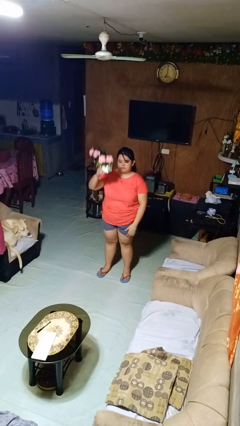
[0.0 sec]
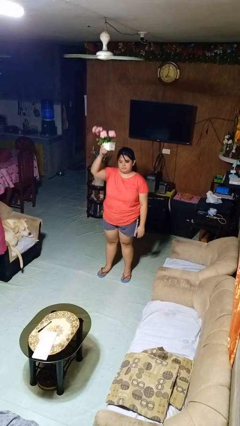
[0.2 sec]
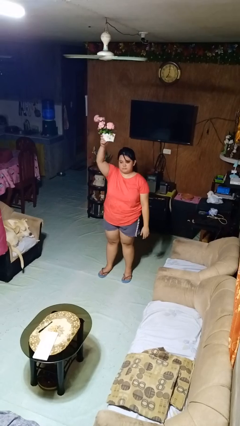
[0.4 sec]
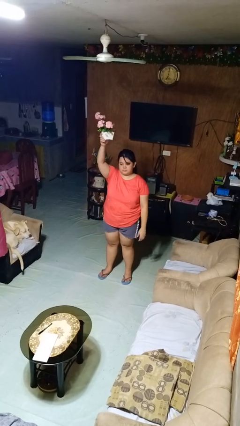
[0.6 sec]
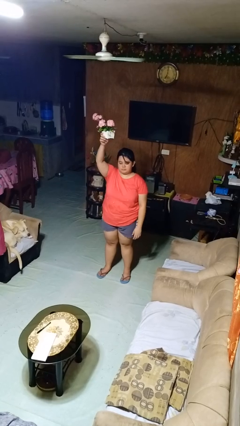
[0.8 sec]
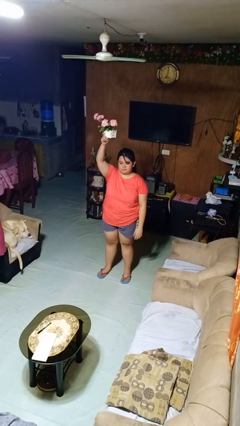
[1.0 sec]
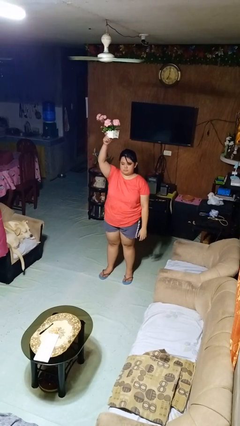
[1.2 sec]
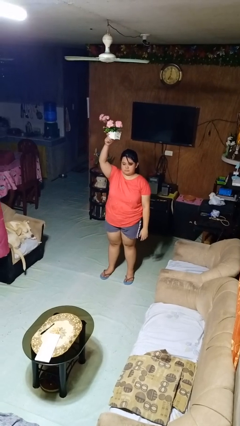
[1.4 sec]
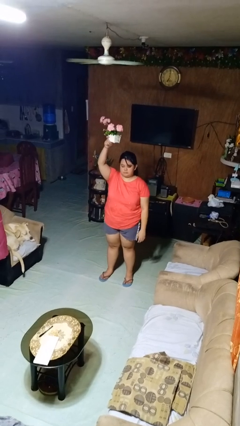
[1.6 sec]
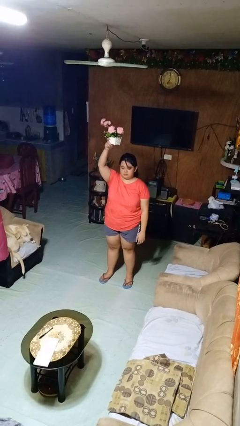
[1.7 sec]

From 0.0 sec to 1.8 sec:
person holds object above head

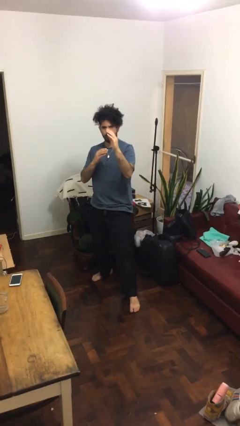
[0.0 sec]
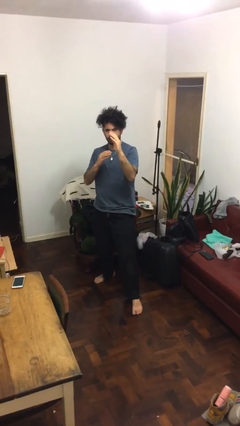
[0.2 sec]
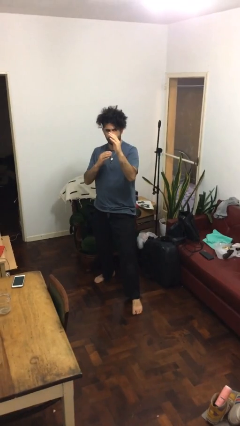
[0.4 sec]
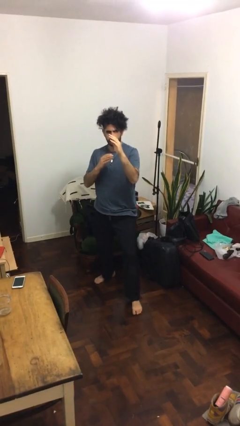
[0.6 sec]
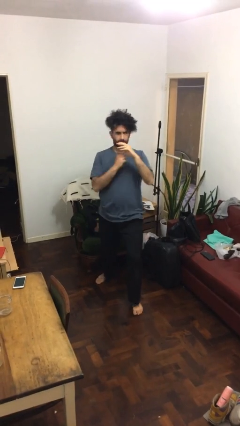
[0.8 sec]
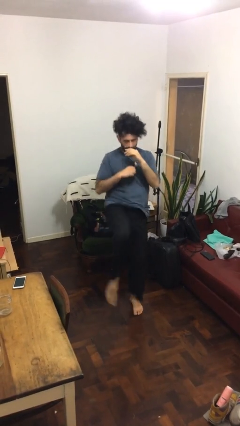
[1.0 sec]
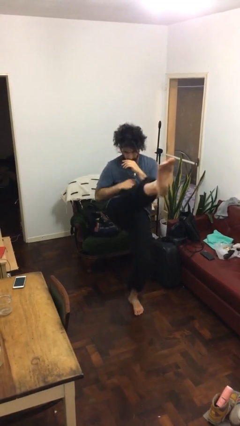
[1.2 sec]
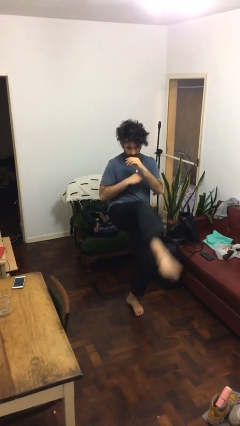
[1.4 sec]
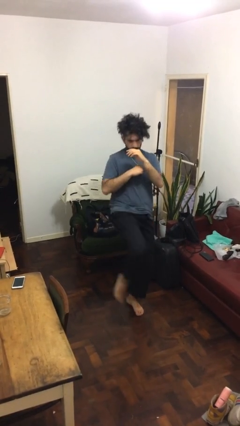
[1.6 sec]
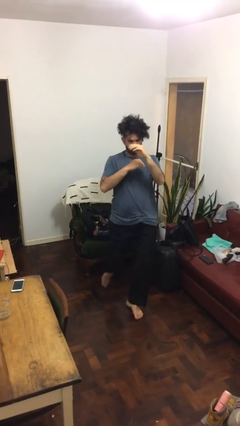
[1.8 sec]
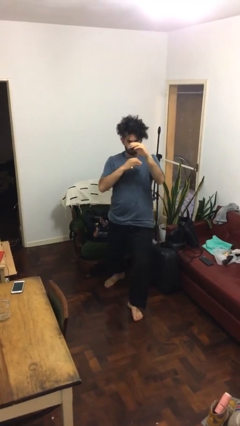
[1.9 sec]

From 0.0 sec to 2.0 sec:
person karate kicks

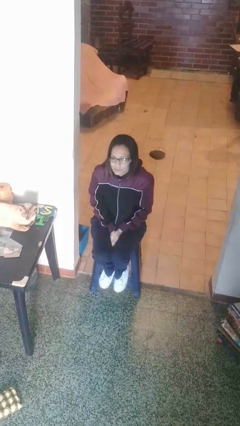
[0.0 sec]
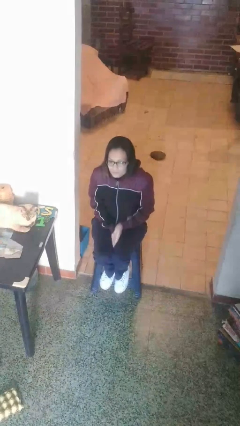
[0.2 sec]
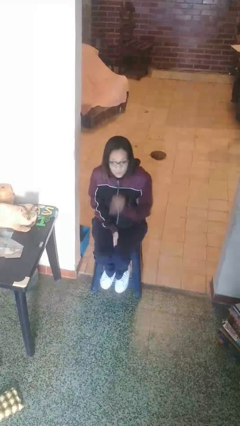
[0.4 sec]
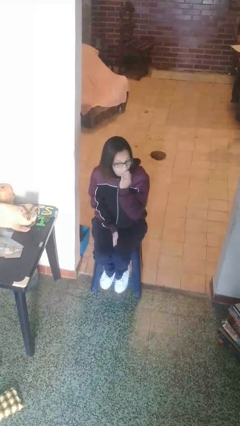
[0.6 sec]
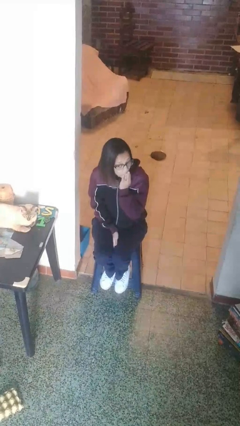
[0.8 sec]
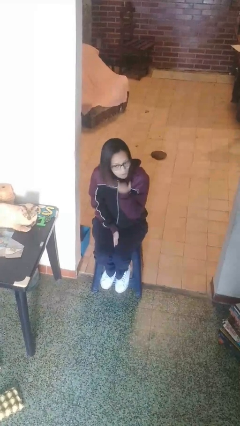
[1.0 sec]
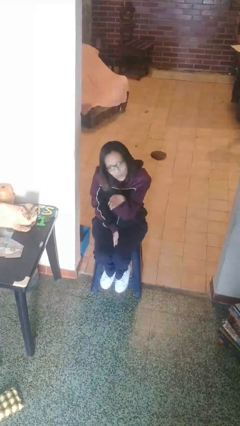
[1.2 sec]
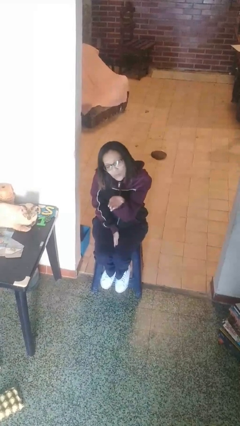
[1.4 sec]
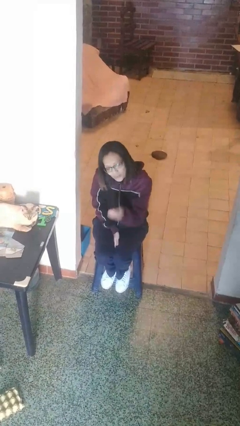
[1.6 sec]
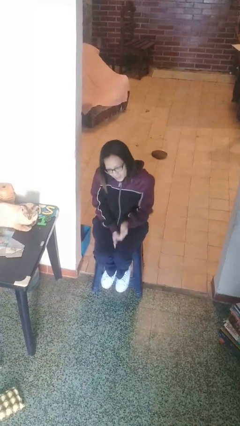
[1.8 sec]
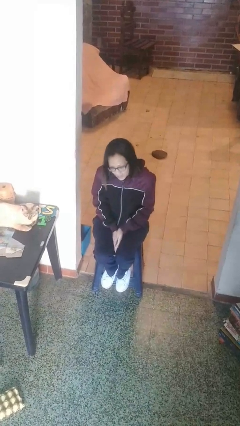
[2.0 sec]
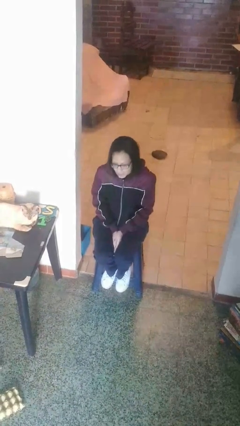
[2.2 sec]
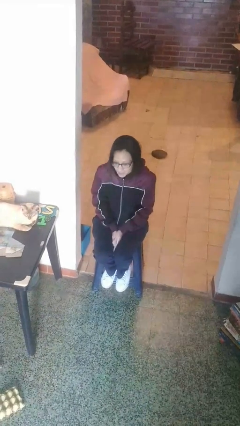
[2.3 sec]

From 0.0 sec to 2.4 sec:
person gestures blow kiss

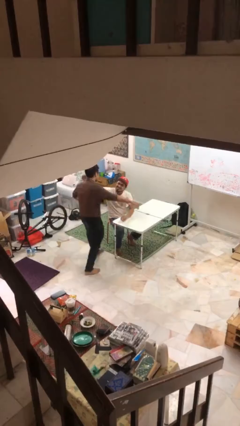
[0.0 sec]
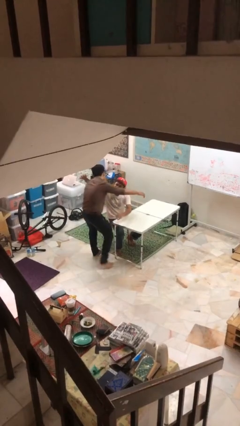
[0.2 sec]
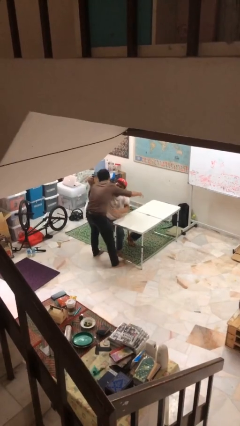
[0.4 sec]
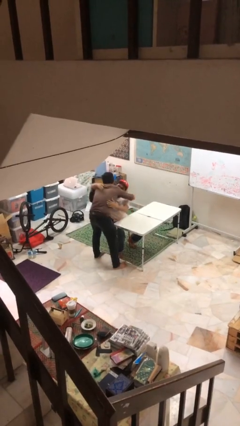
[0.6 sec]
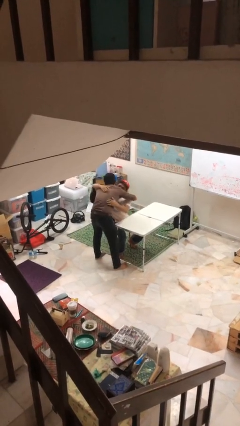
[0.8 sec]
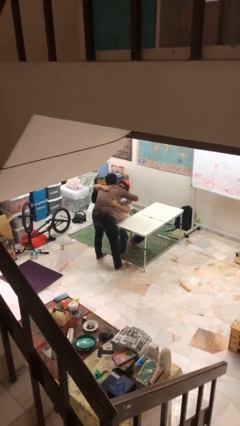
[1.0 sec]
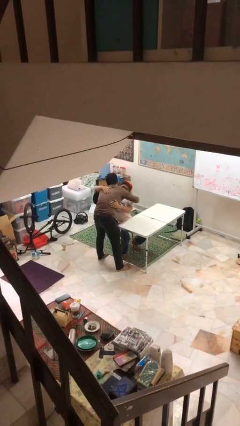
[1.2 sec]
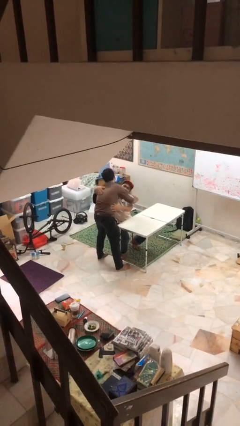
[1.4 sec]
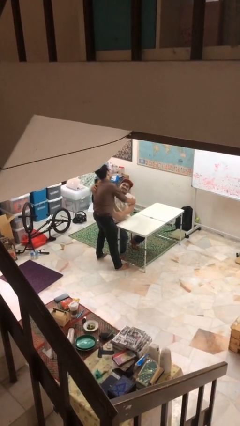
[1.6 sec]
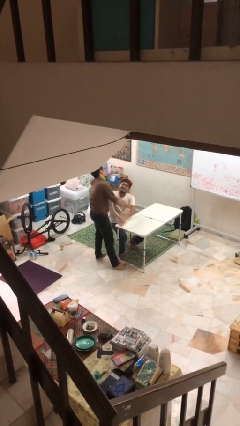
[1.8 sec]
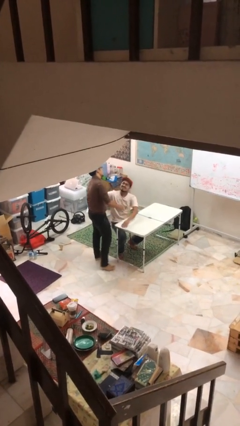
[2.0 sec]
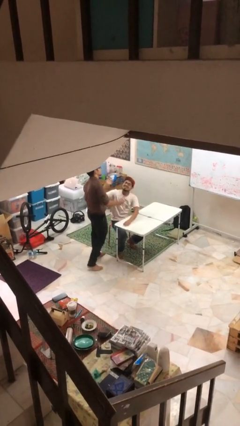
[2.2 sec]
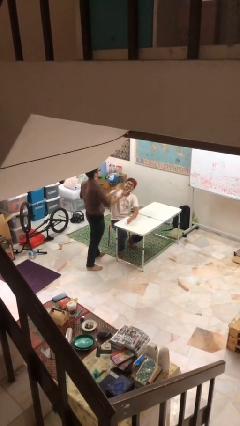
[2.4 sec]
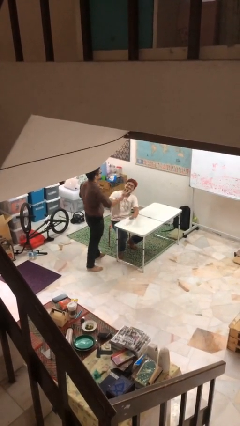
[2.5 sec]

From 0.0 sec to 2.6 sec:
person embraces person

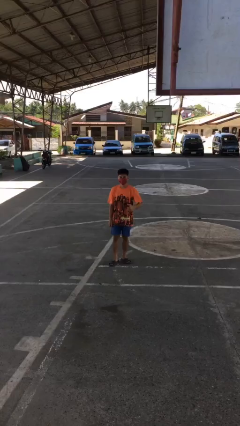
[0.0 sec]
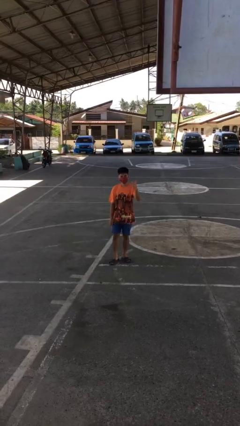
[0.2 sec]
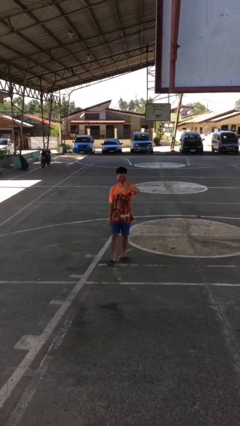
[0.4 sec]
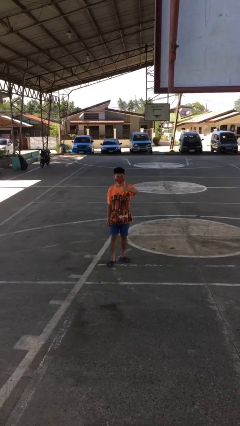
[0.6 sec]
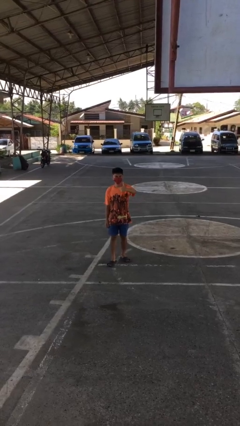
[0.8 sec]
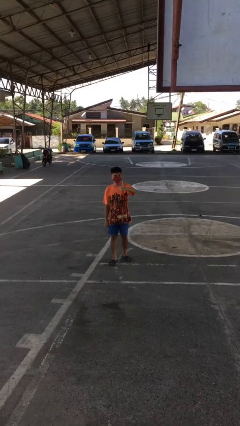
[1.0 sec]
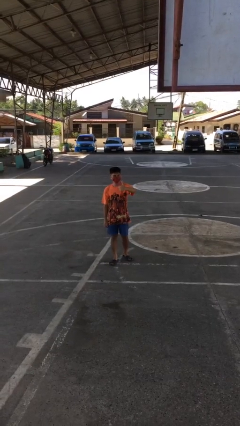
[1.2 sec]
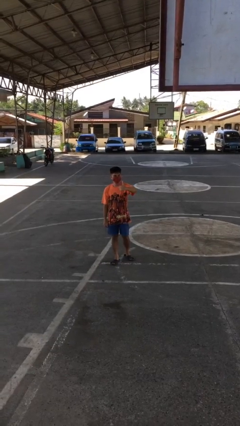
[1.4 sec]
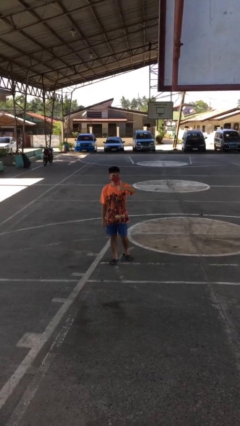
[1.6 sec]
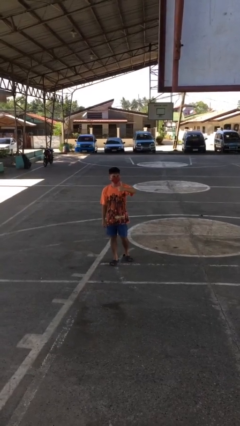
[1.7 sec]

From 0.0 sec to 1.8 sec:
person gestures thumbs up

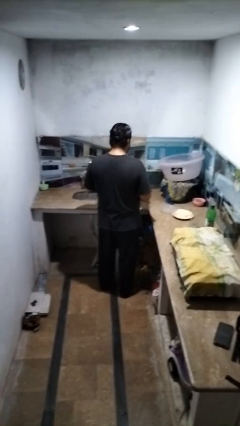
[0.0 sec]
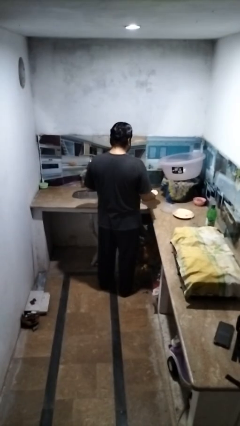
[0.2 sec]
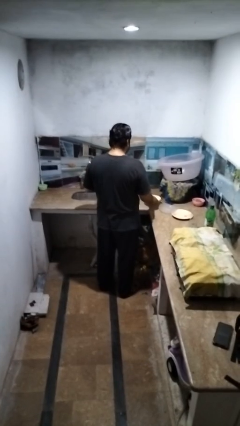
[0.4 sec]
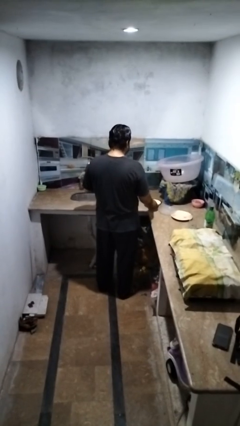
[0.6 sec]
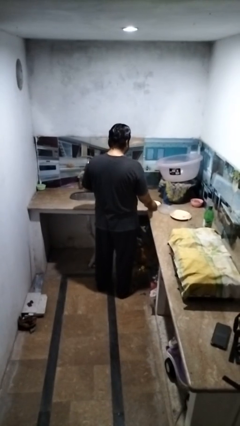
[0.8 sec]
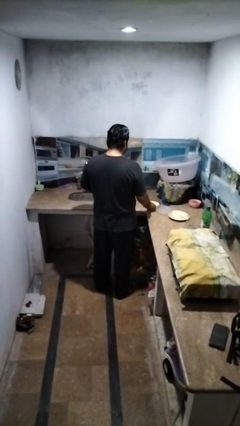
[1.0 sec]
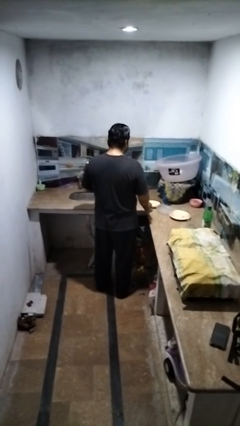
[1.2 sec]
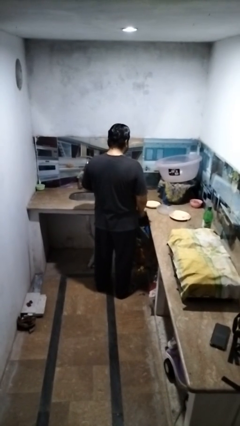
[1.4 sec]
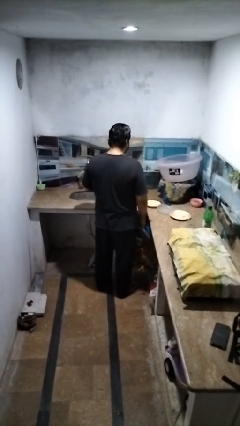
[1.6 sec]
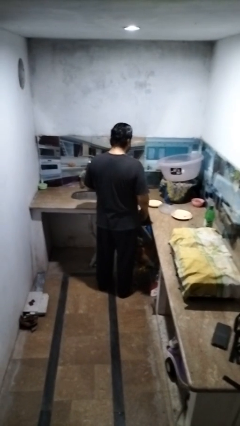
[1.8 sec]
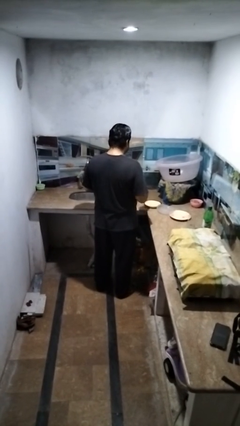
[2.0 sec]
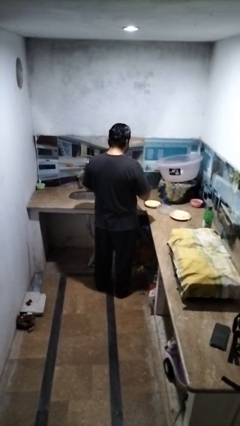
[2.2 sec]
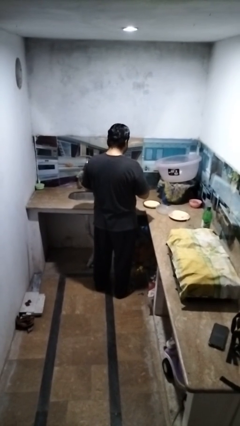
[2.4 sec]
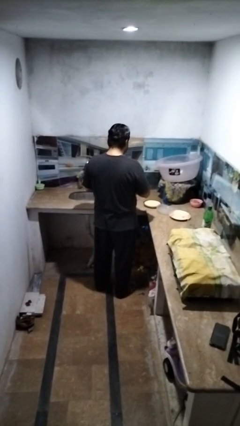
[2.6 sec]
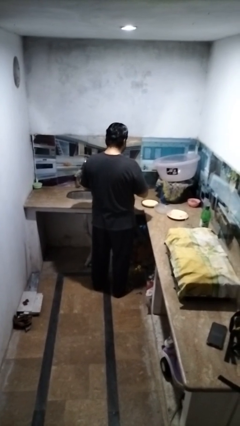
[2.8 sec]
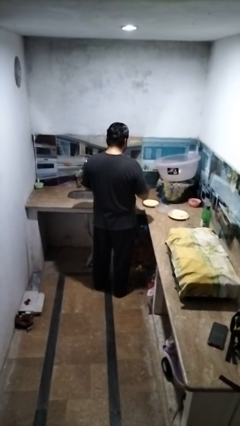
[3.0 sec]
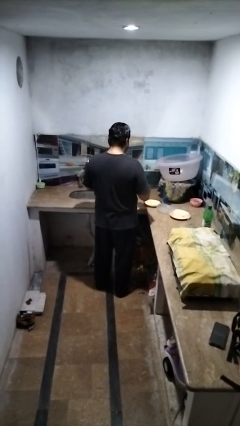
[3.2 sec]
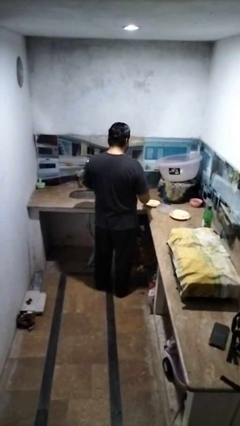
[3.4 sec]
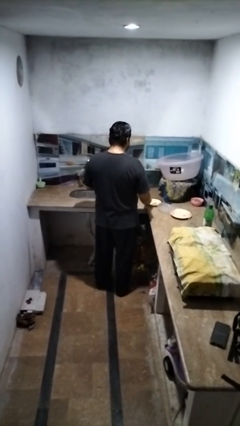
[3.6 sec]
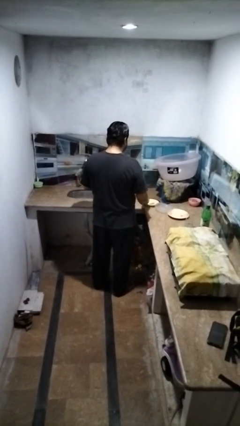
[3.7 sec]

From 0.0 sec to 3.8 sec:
person sets table

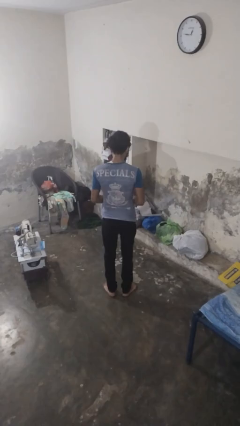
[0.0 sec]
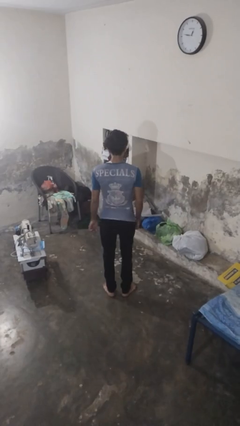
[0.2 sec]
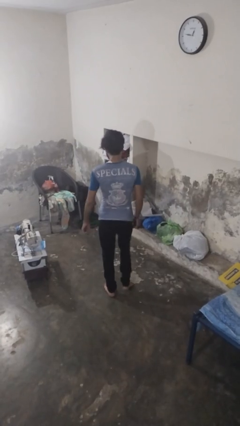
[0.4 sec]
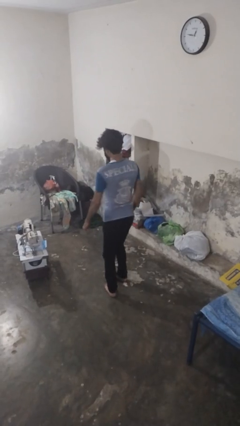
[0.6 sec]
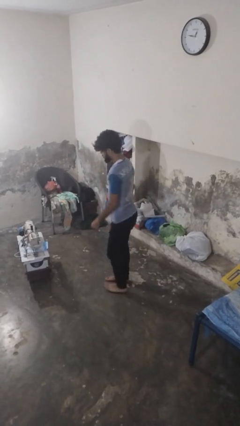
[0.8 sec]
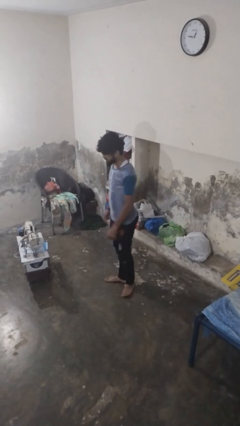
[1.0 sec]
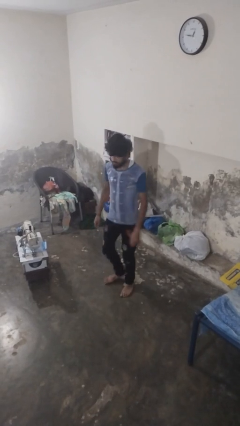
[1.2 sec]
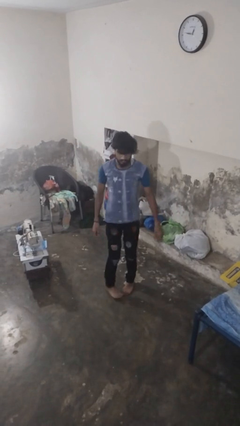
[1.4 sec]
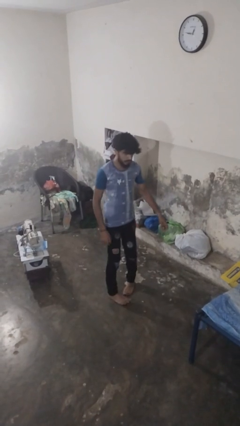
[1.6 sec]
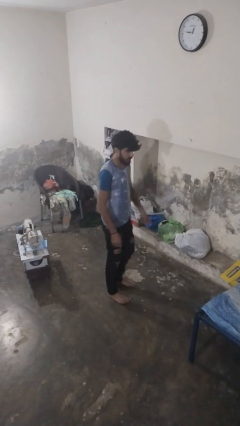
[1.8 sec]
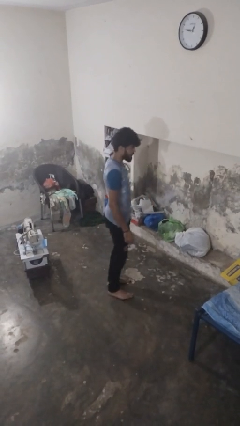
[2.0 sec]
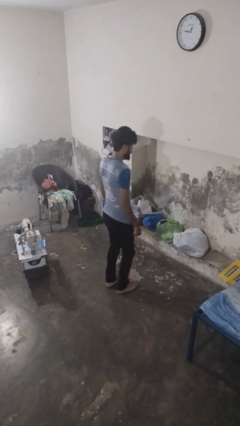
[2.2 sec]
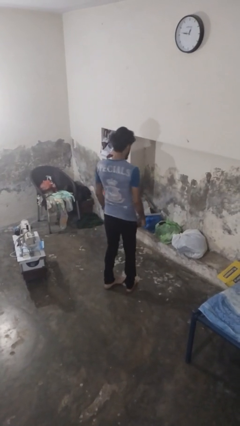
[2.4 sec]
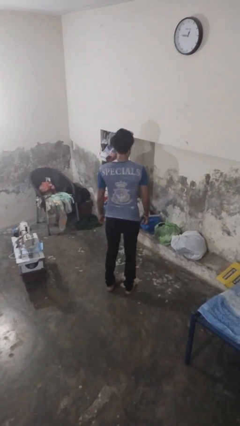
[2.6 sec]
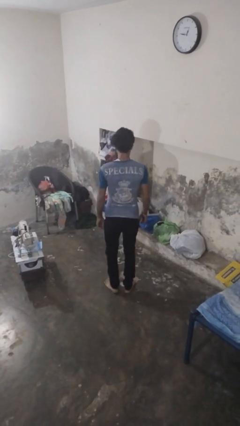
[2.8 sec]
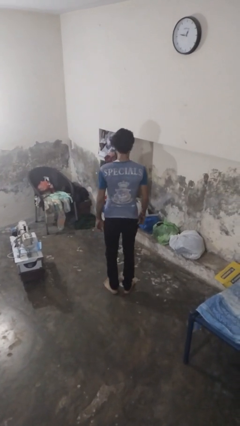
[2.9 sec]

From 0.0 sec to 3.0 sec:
person twirls
